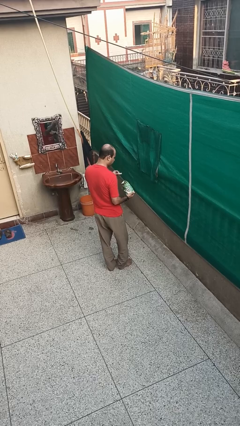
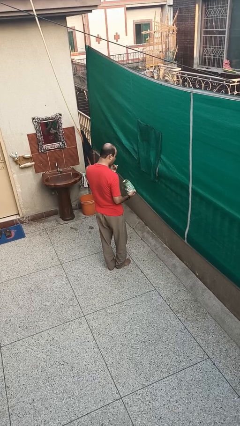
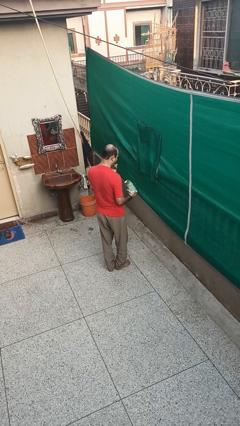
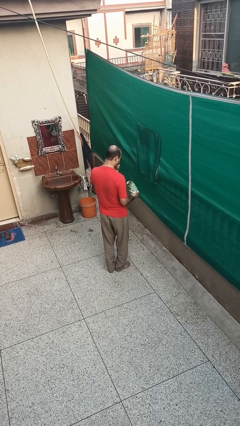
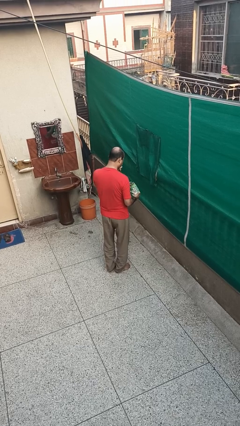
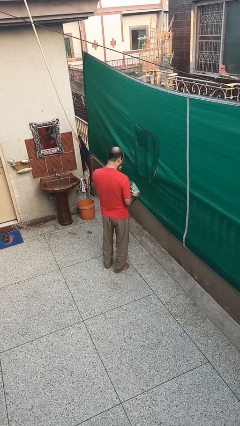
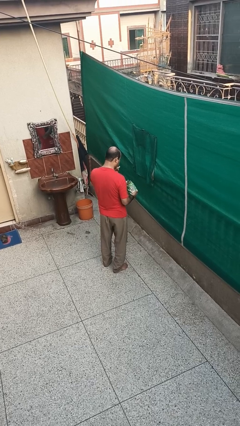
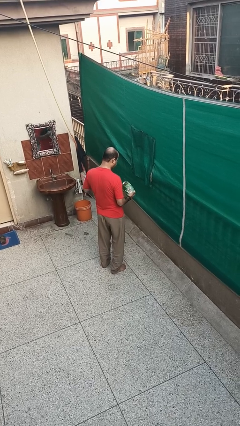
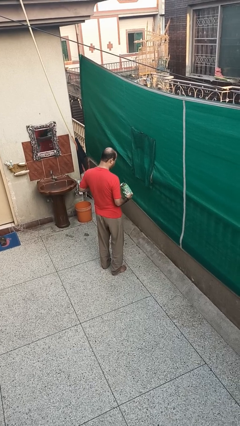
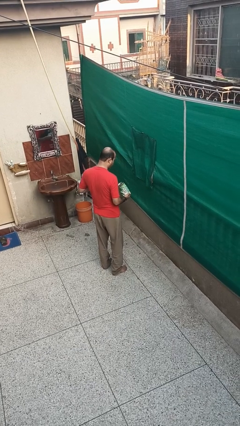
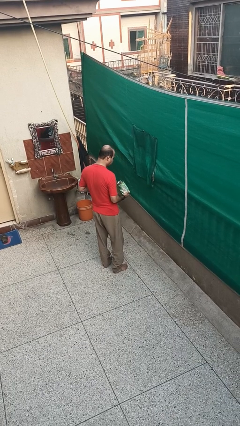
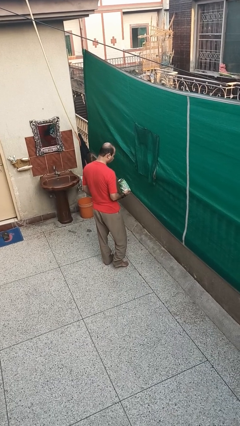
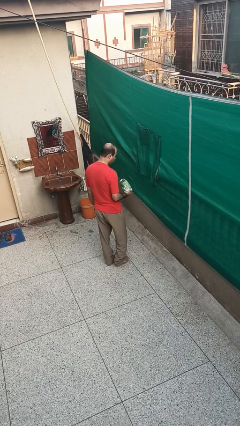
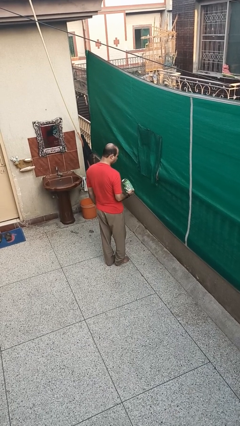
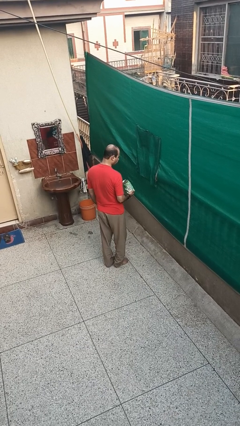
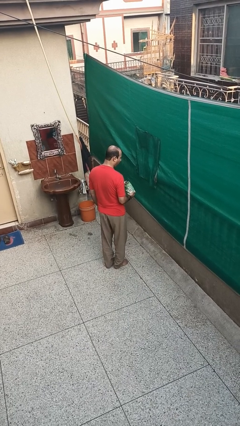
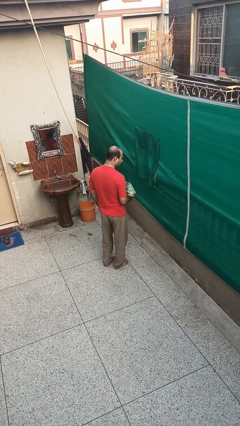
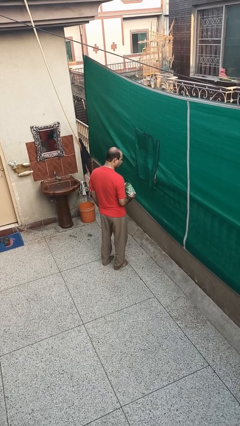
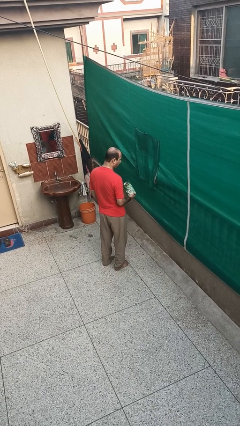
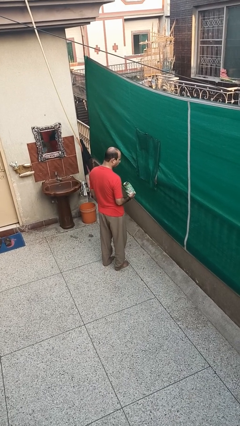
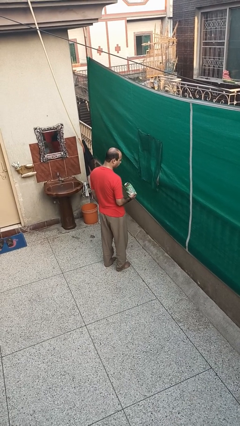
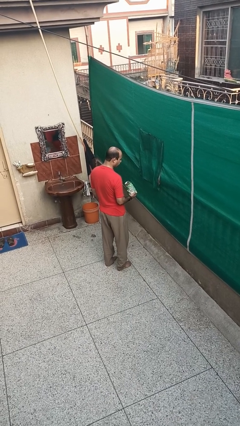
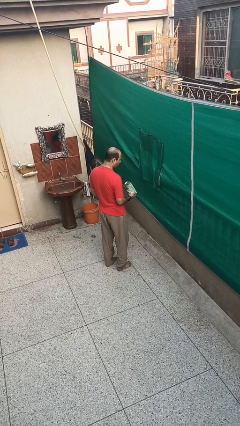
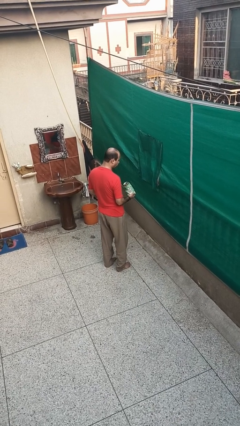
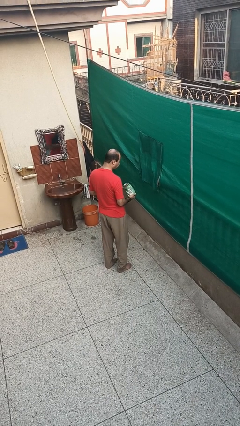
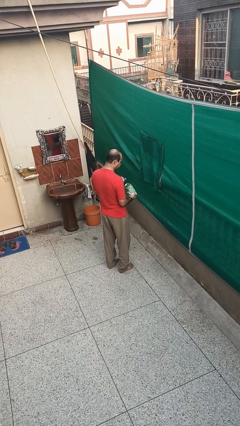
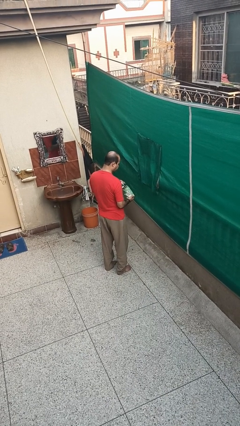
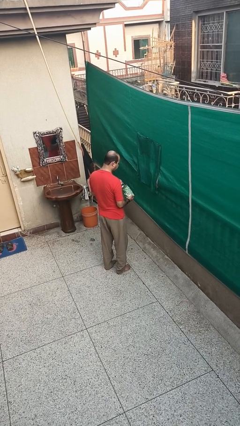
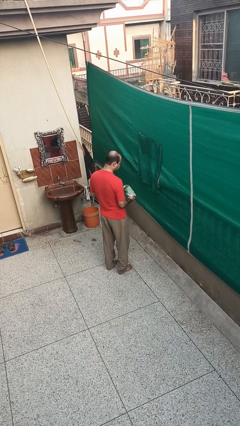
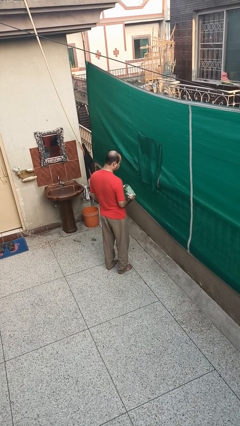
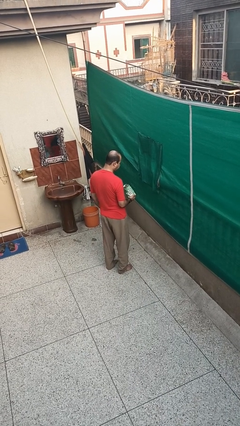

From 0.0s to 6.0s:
person eats snack from bag

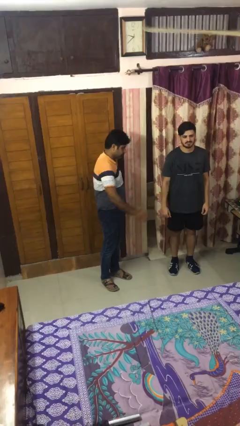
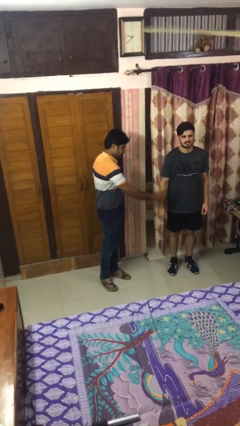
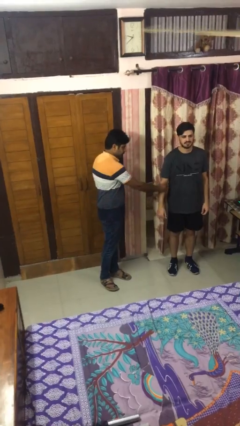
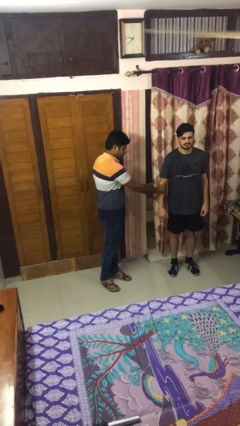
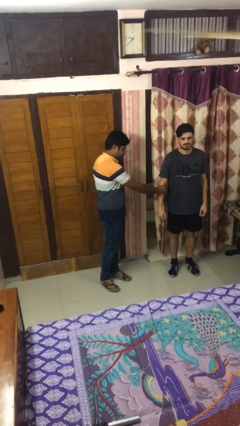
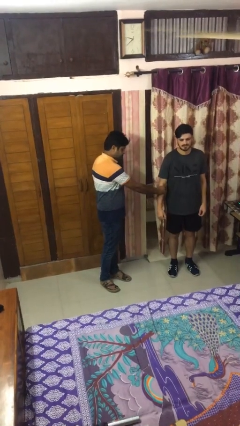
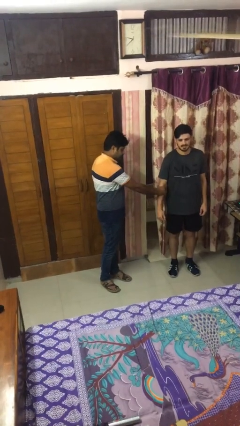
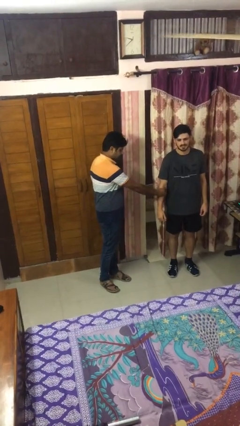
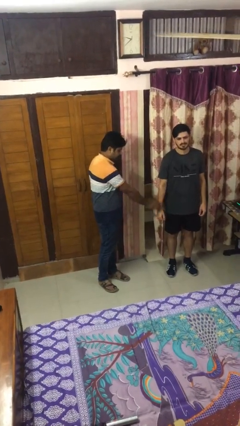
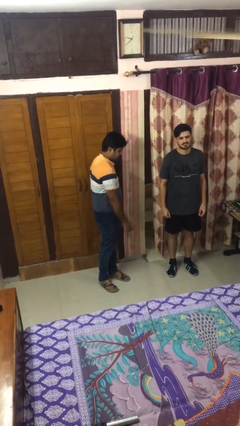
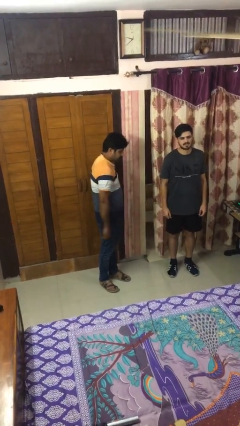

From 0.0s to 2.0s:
person grabs person by forearm

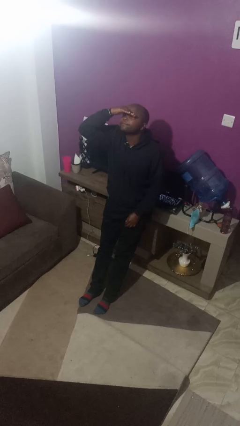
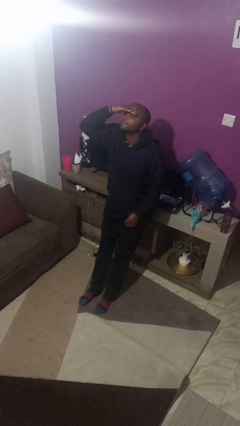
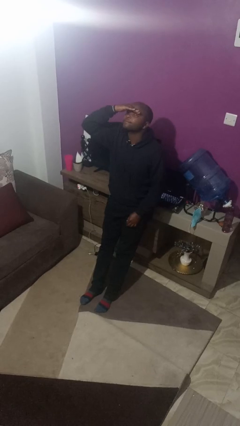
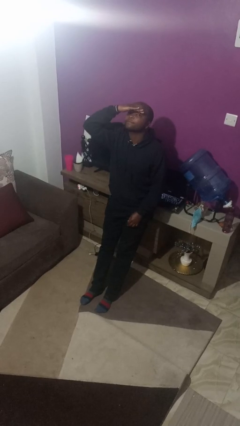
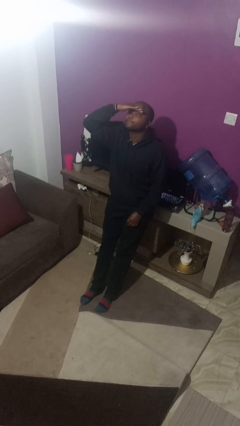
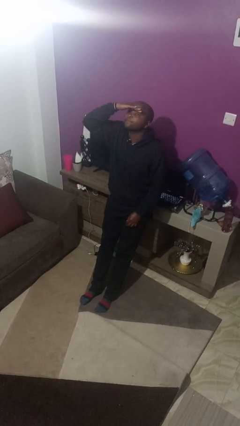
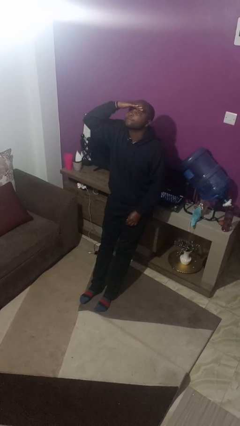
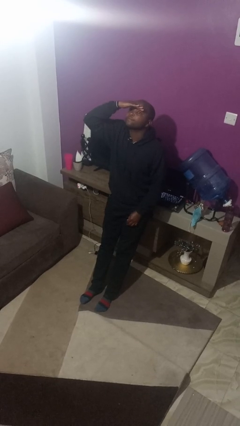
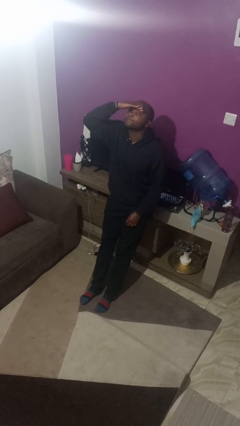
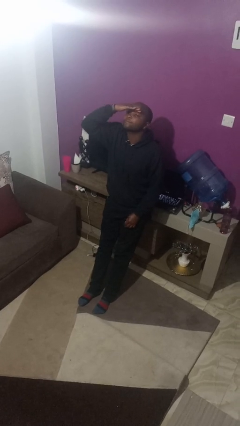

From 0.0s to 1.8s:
person shades eyes

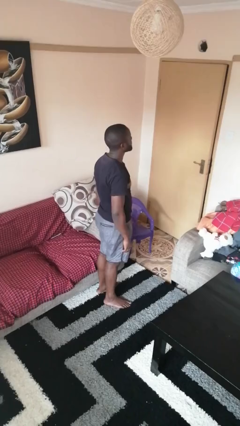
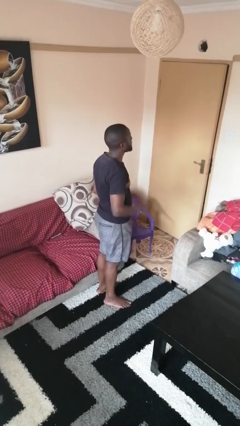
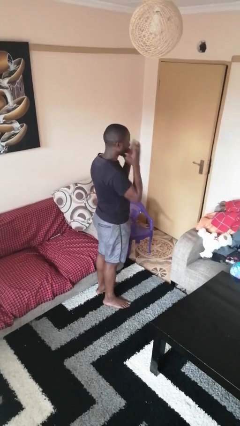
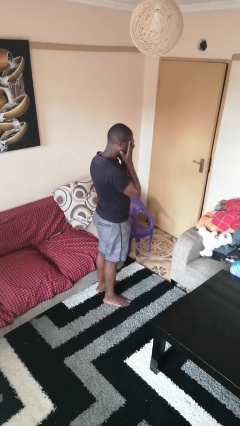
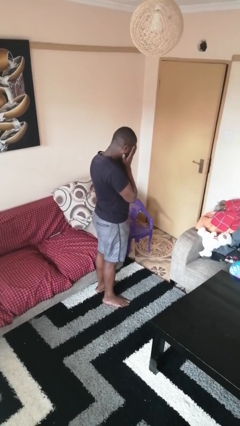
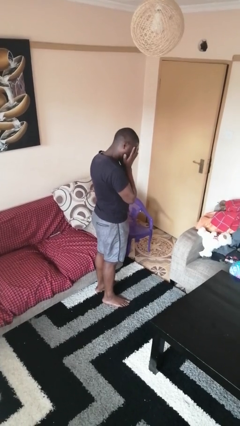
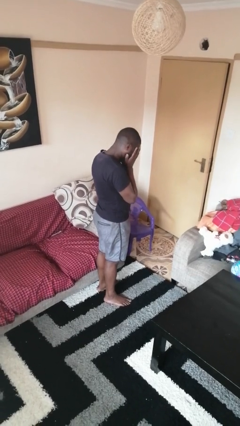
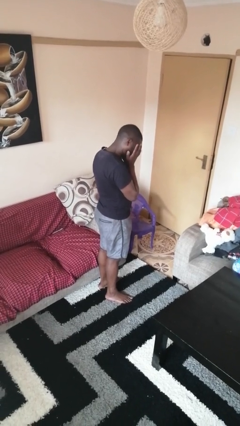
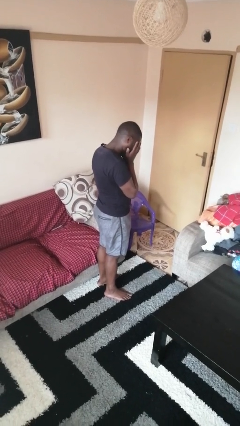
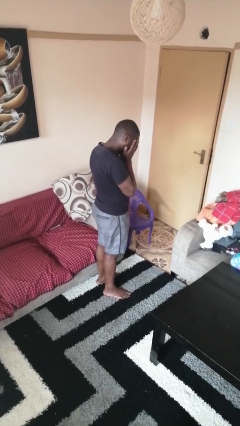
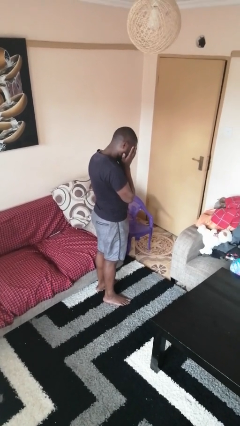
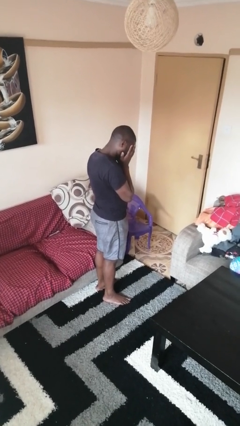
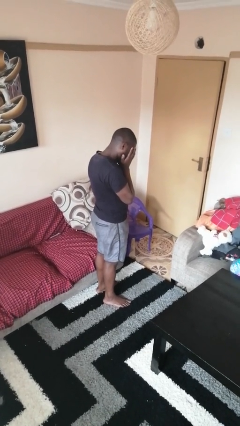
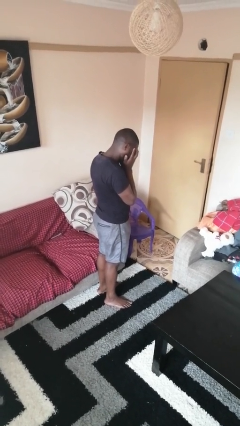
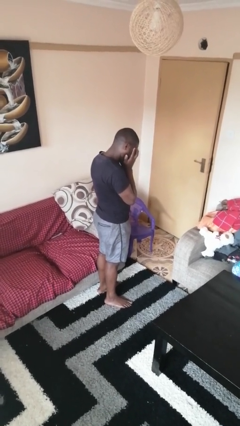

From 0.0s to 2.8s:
person covers face with hands

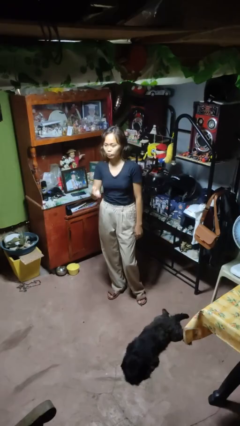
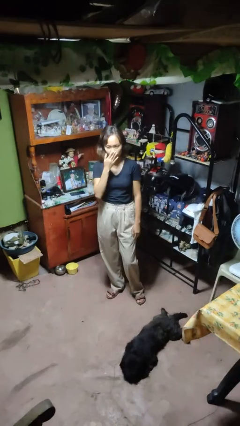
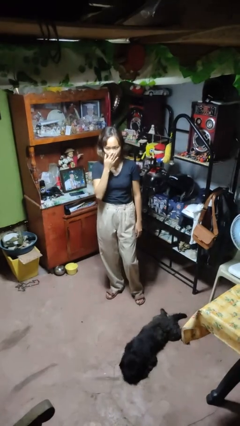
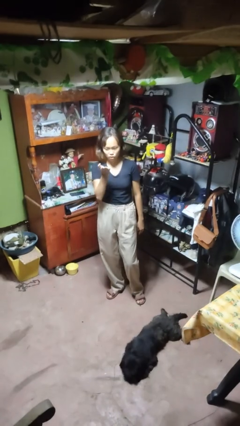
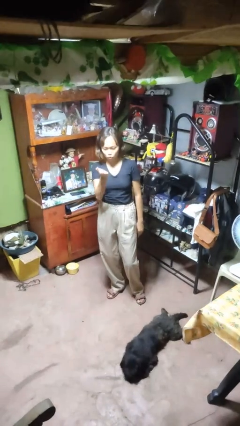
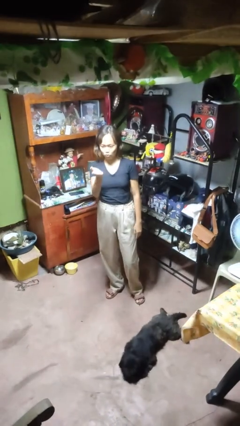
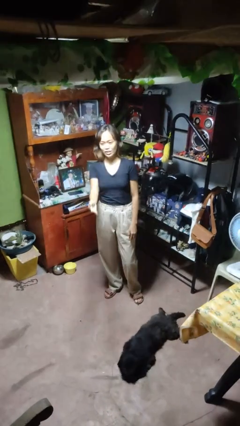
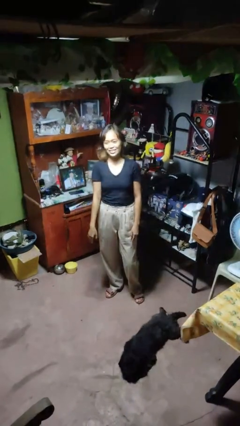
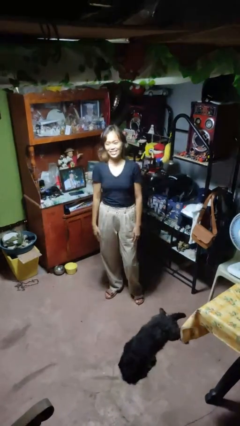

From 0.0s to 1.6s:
person gestures blow kiss

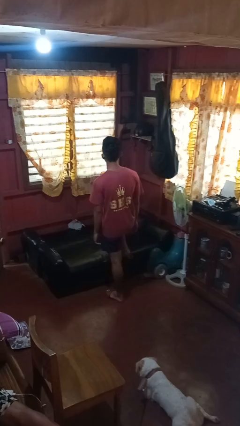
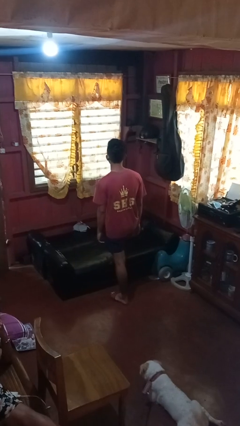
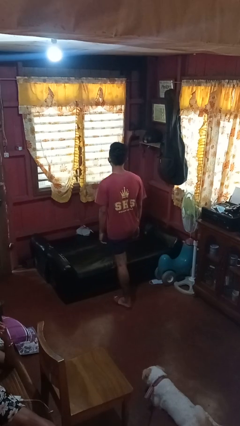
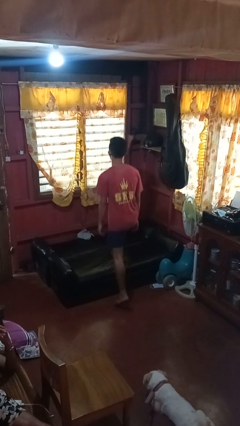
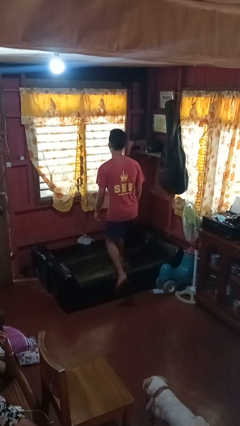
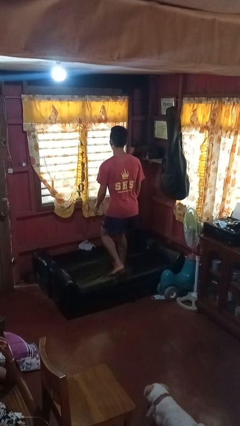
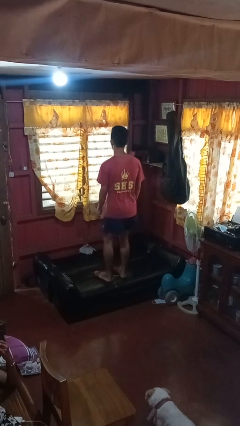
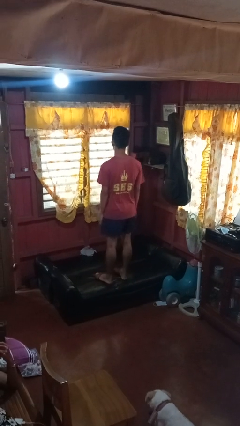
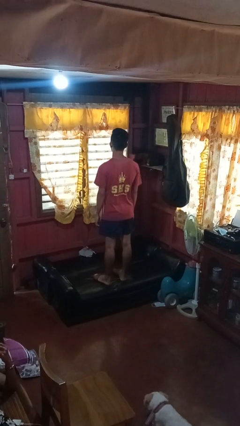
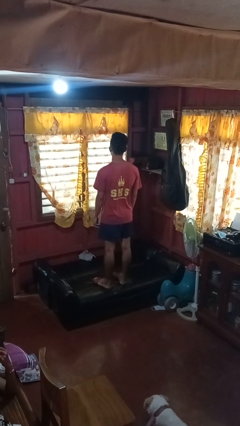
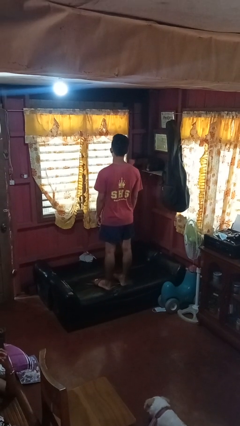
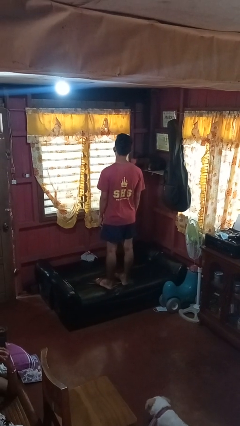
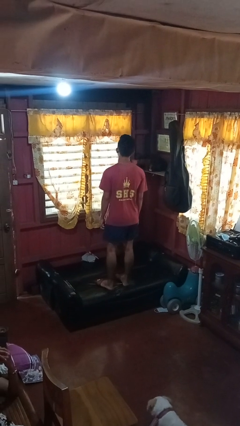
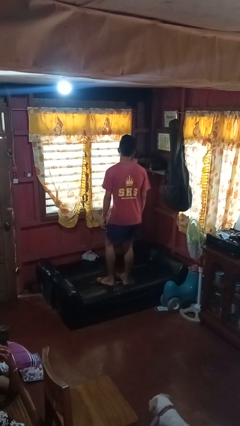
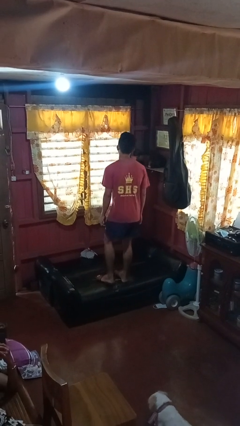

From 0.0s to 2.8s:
person climbs on couch

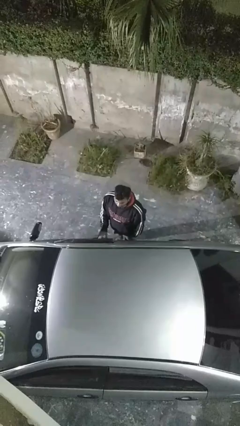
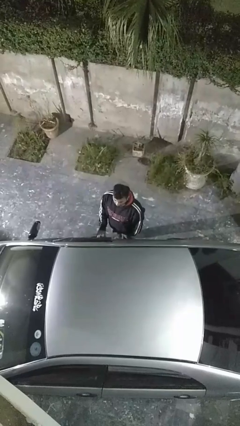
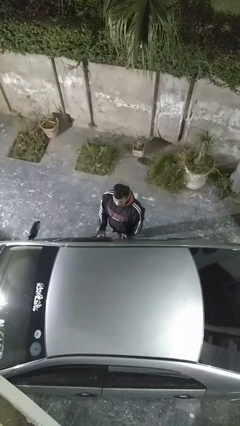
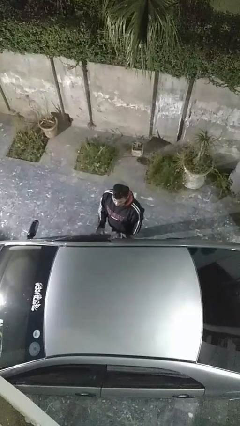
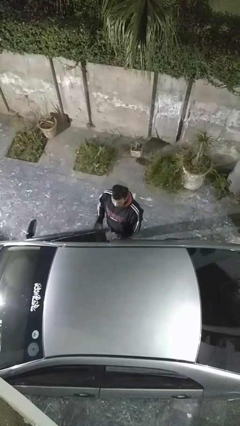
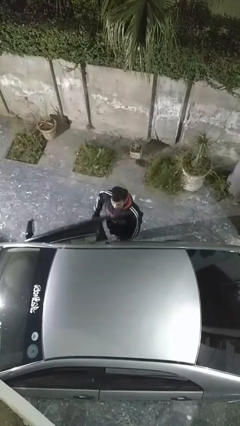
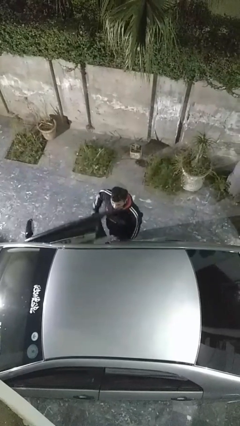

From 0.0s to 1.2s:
person opens car door
